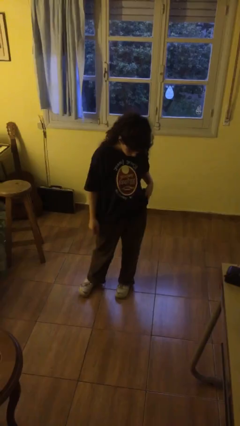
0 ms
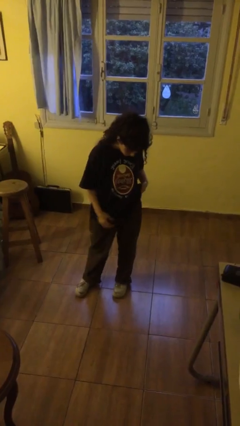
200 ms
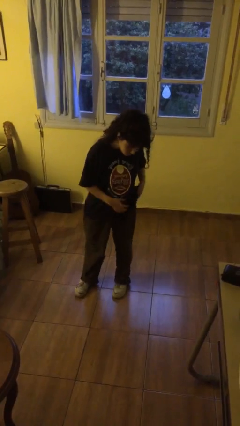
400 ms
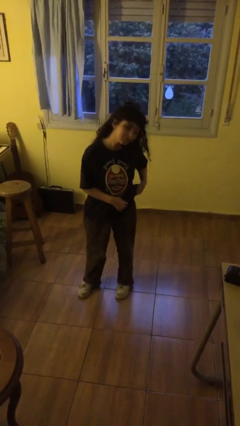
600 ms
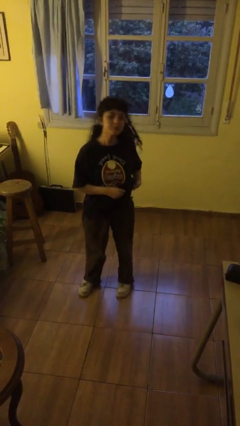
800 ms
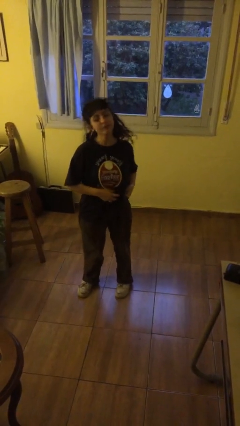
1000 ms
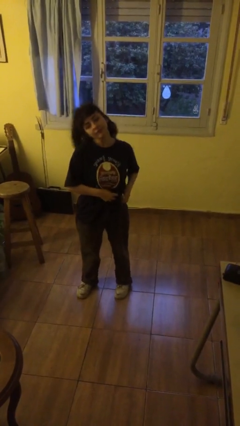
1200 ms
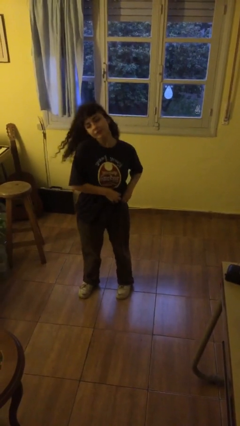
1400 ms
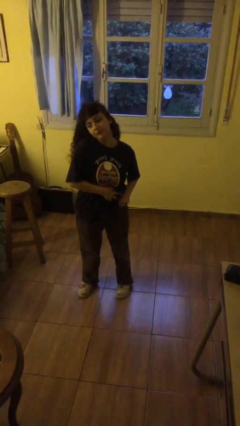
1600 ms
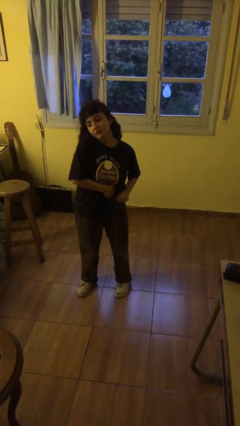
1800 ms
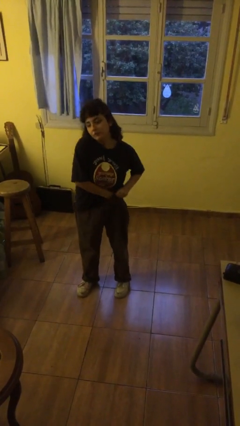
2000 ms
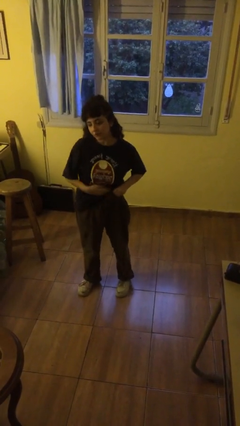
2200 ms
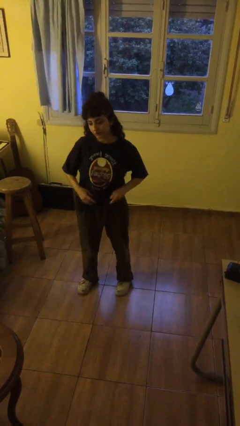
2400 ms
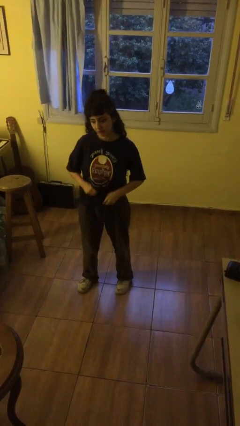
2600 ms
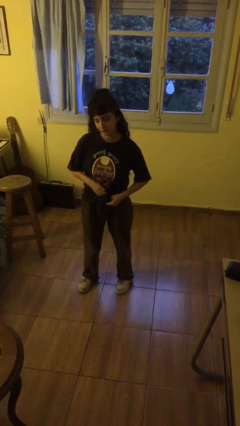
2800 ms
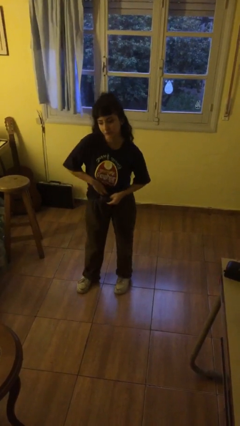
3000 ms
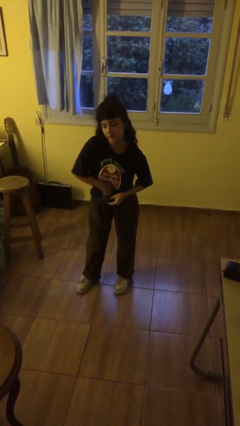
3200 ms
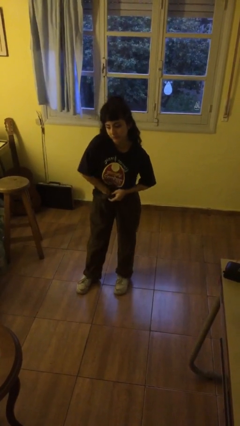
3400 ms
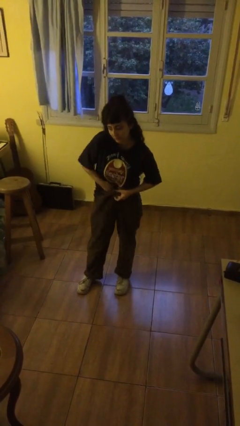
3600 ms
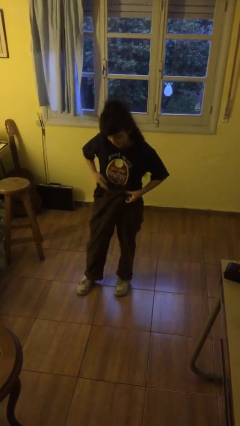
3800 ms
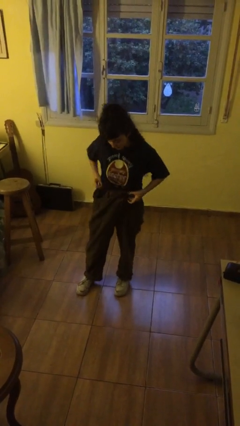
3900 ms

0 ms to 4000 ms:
person tucks in shirt

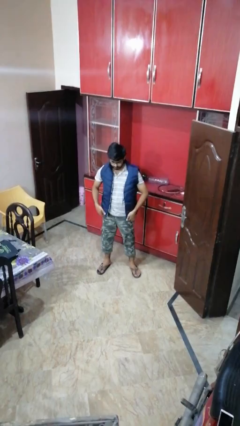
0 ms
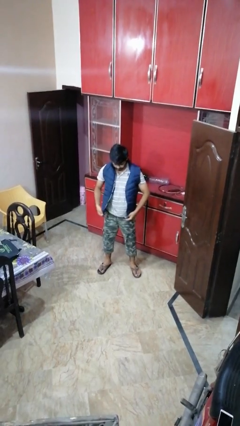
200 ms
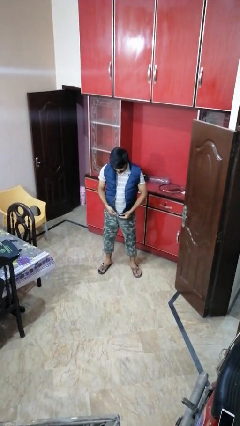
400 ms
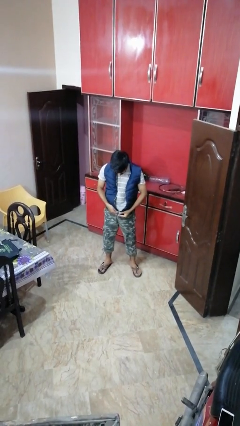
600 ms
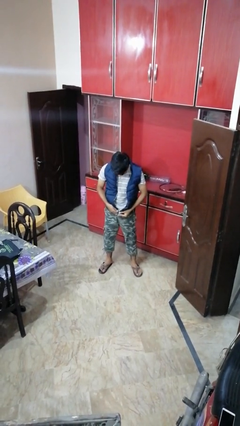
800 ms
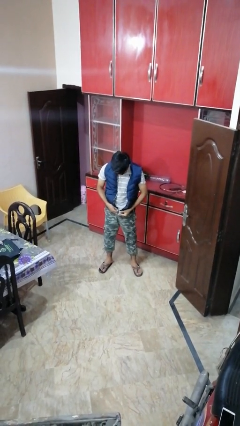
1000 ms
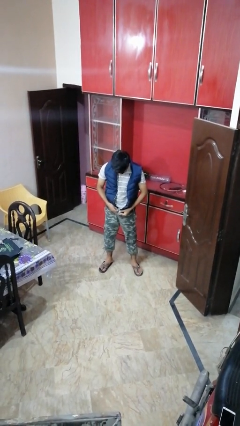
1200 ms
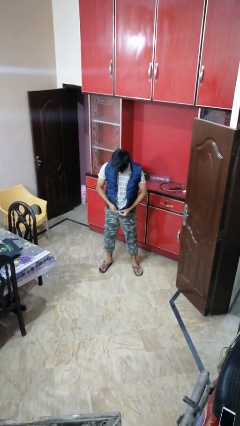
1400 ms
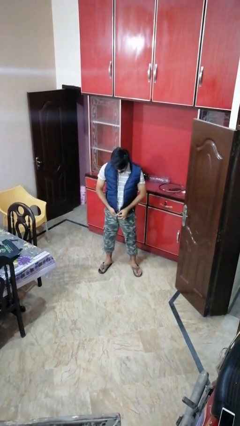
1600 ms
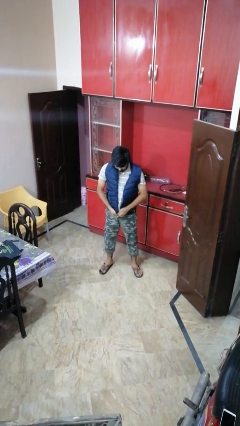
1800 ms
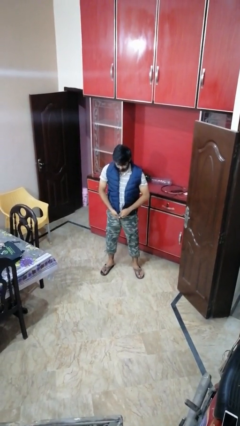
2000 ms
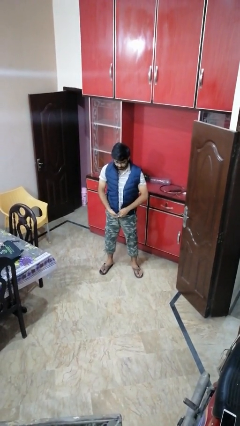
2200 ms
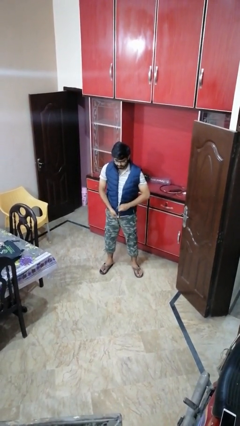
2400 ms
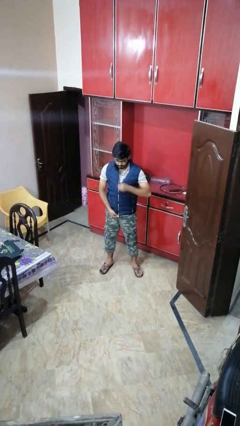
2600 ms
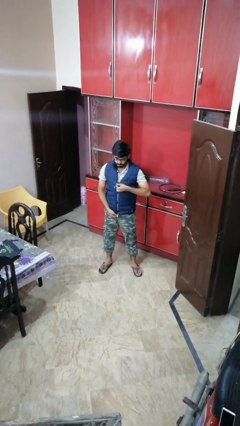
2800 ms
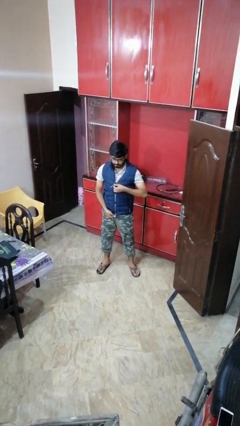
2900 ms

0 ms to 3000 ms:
person zips up jacket

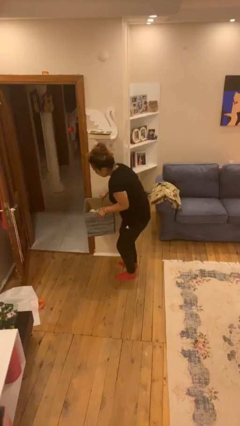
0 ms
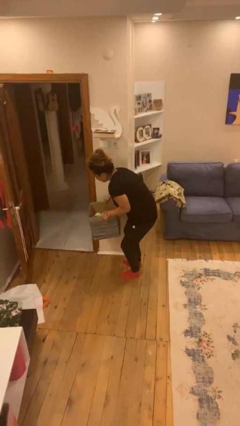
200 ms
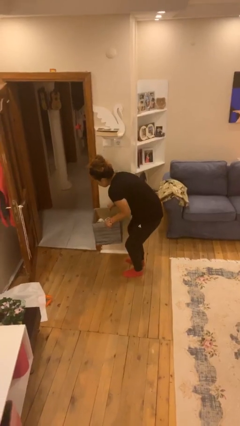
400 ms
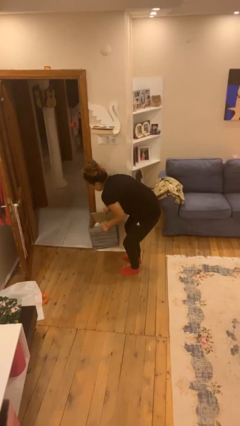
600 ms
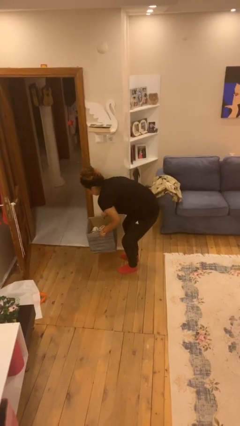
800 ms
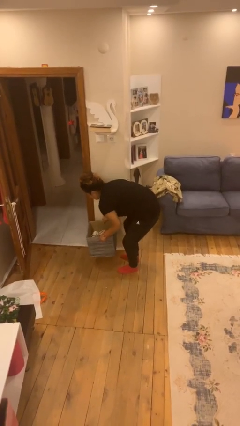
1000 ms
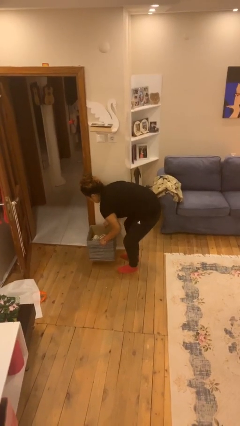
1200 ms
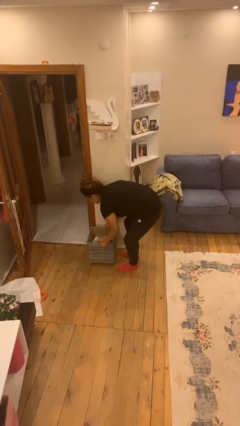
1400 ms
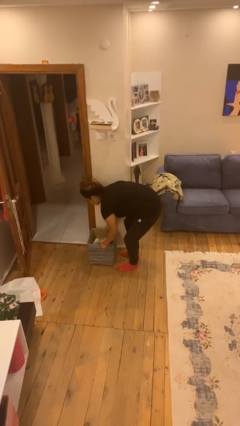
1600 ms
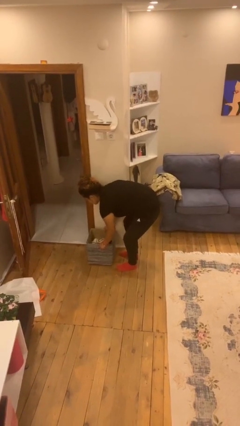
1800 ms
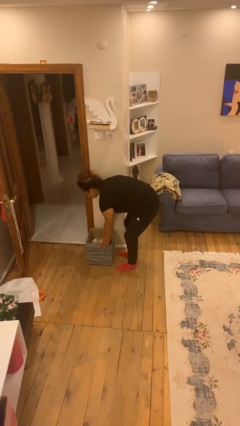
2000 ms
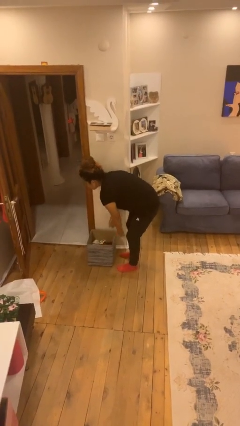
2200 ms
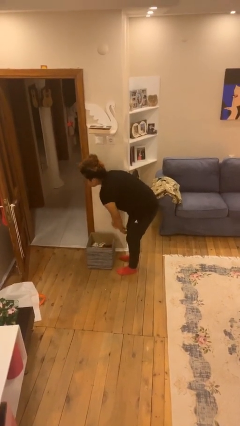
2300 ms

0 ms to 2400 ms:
person puts down object on floor

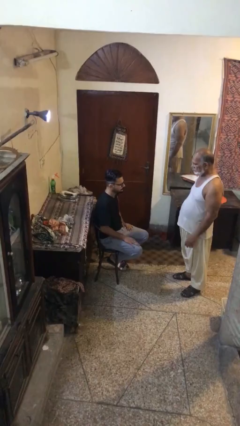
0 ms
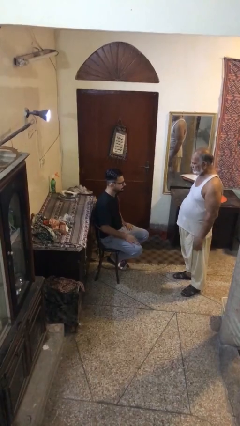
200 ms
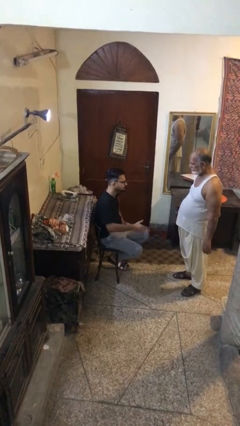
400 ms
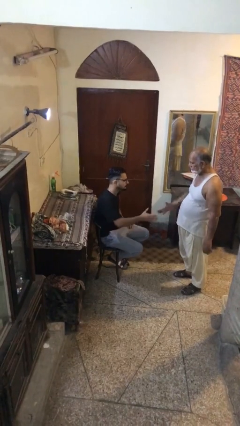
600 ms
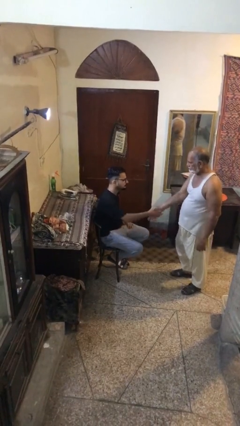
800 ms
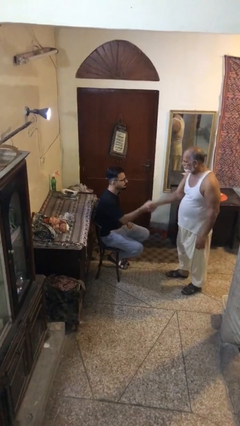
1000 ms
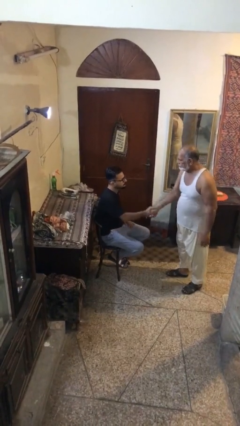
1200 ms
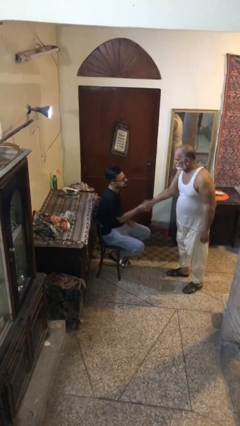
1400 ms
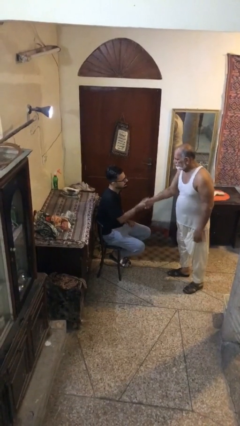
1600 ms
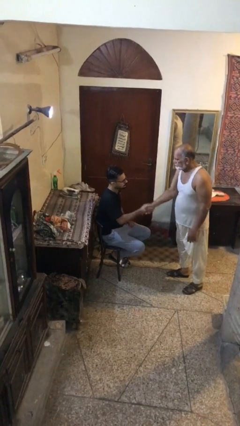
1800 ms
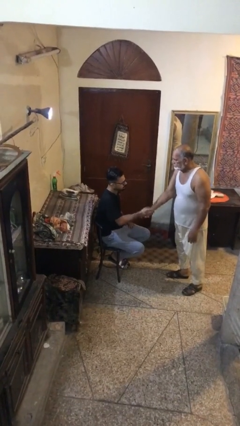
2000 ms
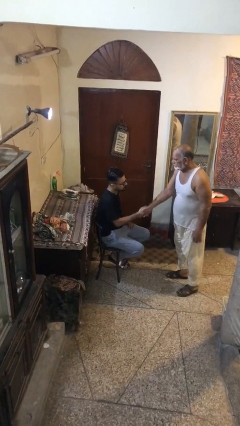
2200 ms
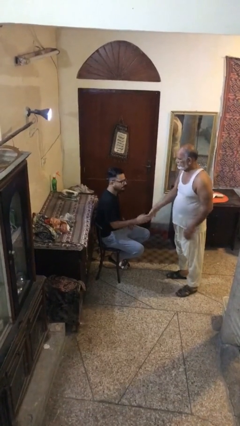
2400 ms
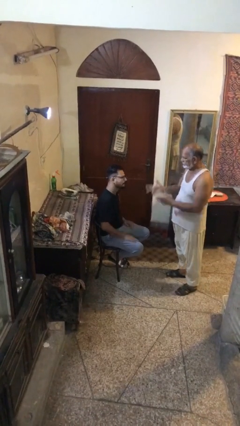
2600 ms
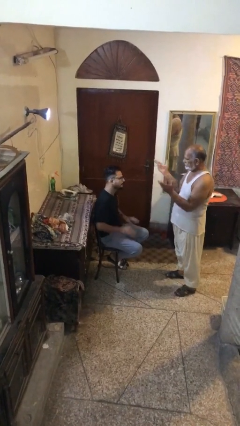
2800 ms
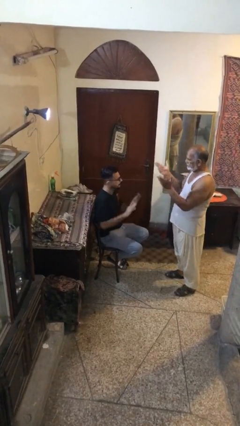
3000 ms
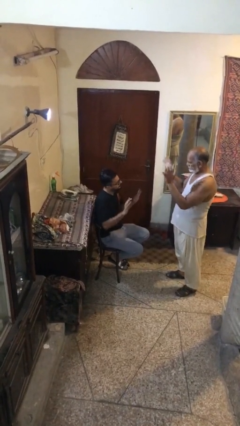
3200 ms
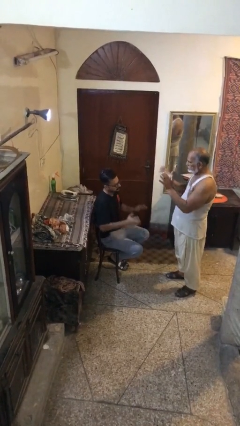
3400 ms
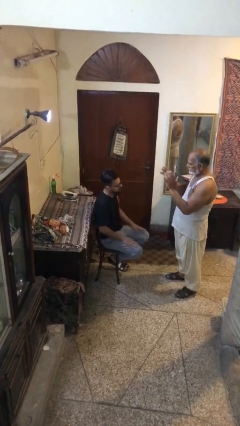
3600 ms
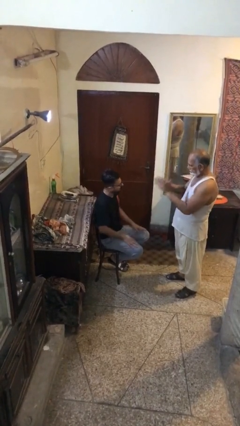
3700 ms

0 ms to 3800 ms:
person shakes hand

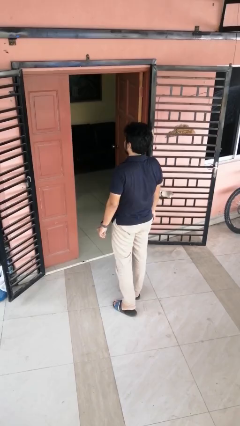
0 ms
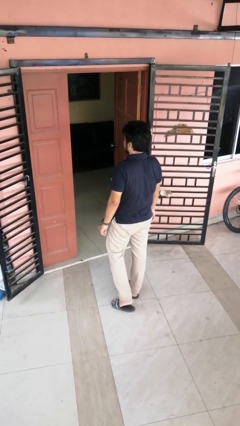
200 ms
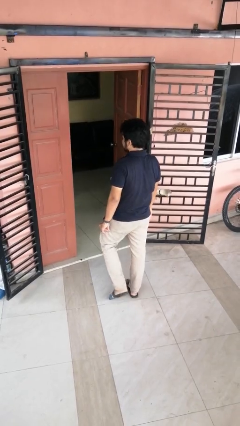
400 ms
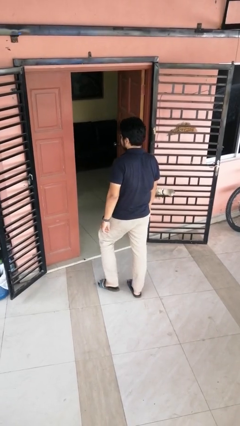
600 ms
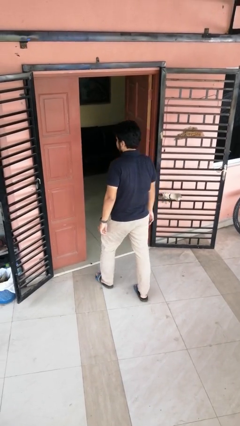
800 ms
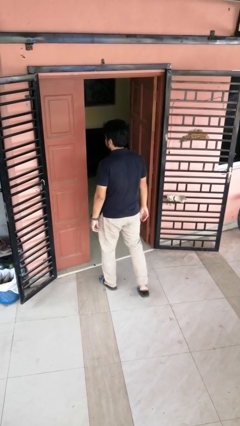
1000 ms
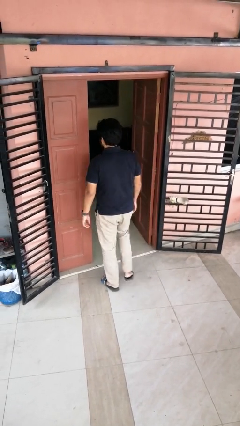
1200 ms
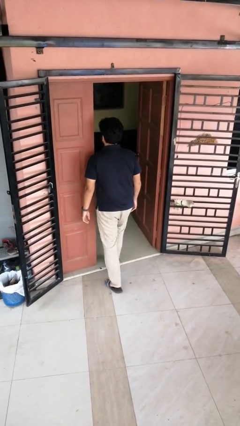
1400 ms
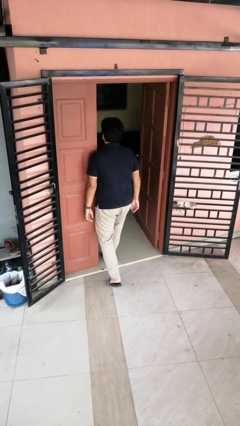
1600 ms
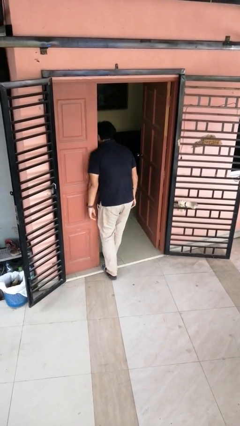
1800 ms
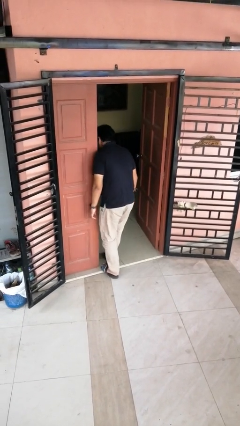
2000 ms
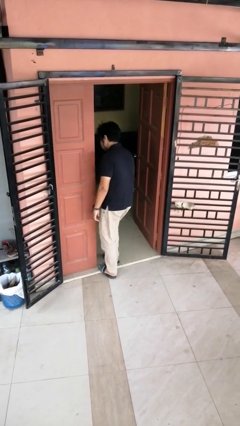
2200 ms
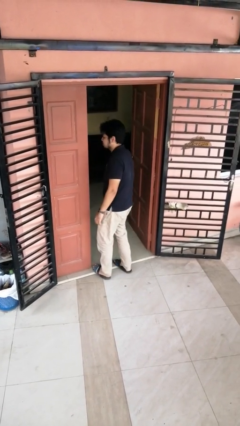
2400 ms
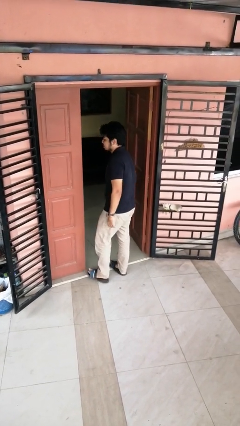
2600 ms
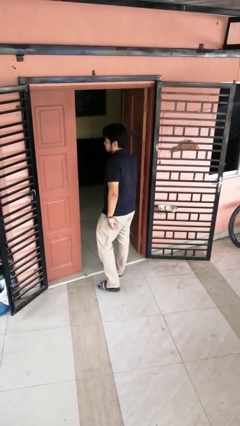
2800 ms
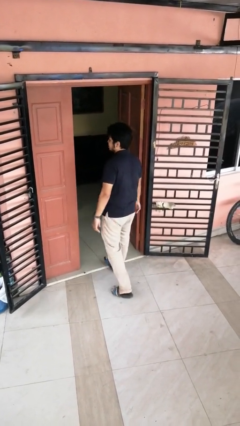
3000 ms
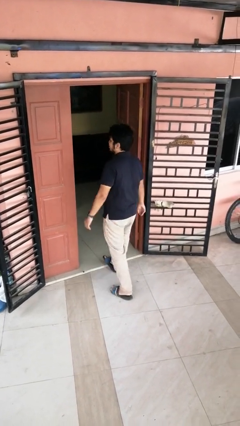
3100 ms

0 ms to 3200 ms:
person bumps into wall

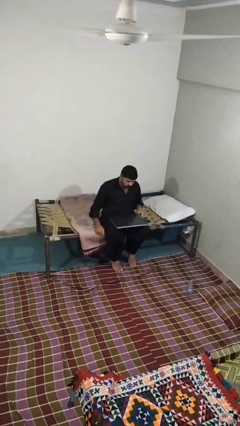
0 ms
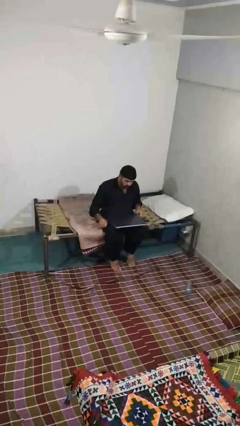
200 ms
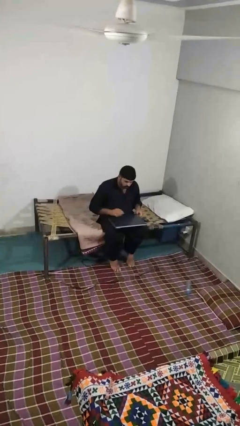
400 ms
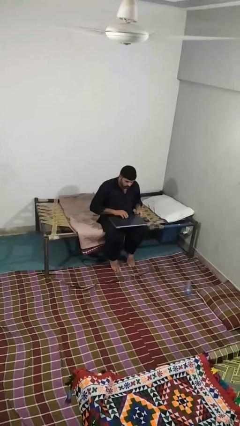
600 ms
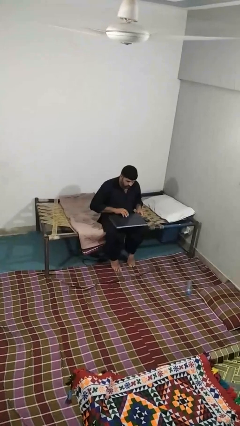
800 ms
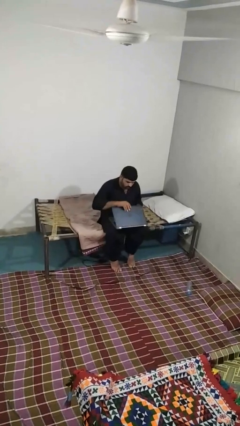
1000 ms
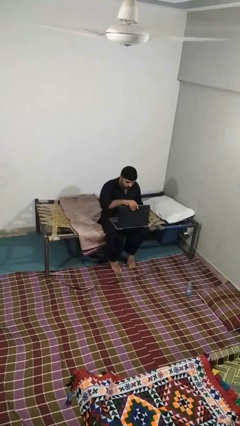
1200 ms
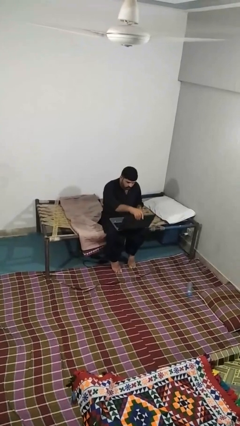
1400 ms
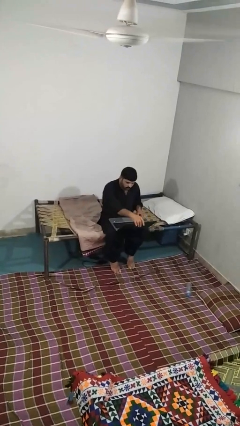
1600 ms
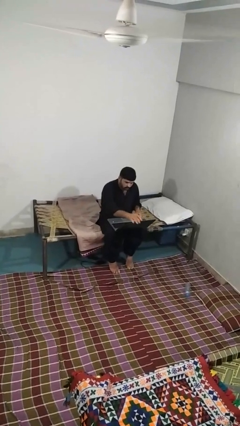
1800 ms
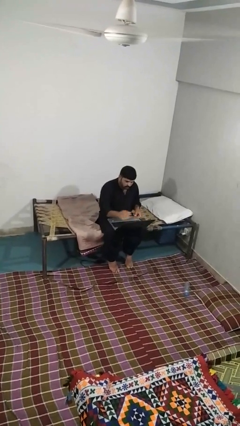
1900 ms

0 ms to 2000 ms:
person opens laptop
